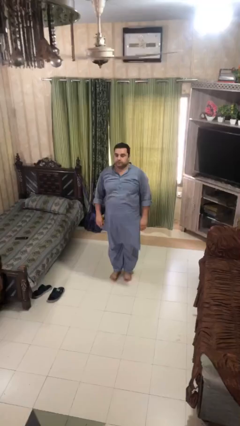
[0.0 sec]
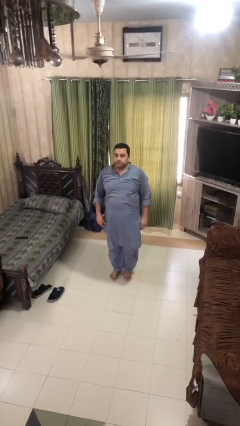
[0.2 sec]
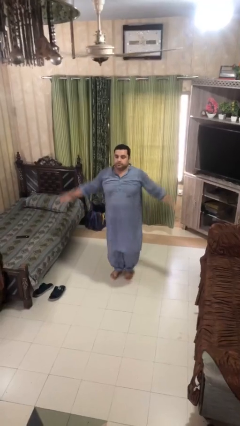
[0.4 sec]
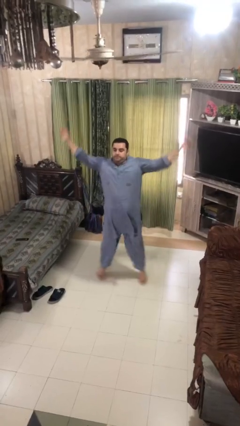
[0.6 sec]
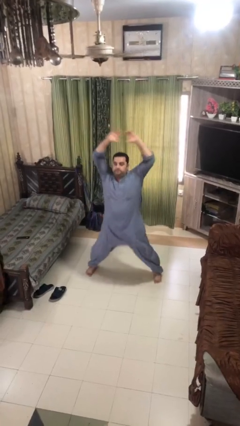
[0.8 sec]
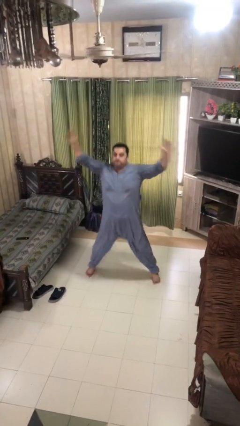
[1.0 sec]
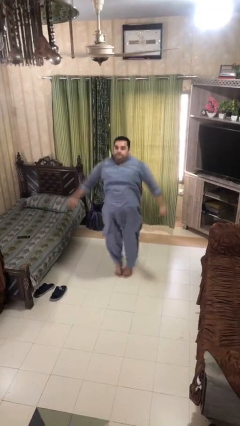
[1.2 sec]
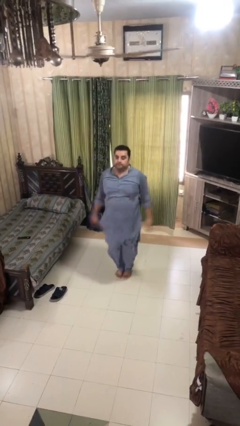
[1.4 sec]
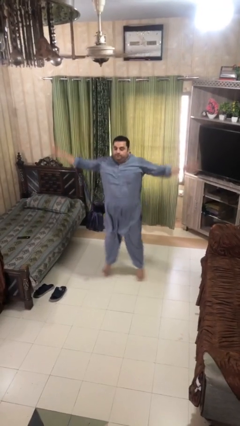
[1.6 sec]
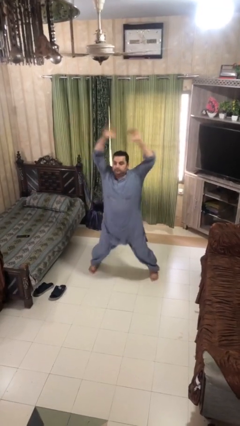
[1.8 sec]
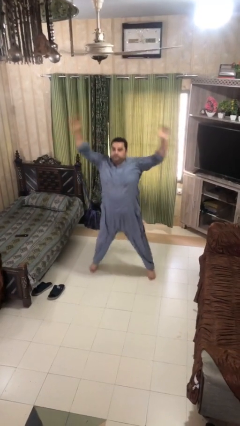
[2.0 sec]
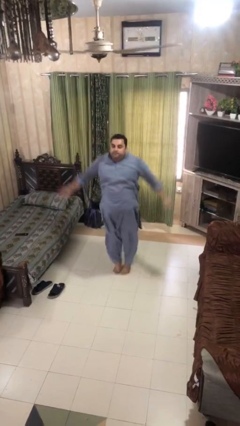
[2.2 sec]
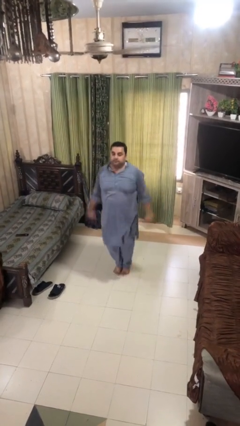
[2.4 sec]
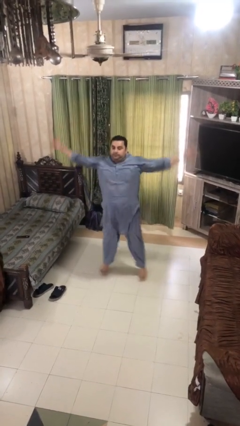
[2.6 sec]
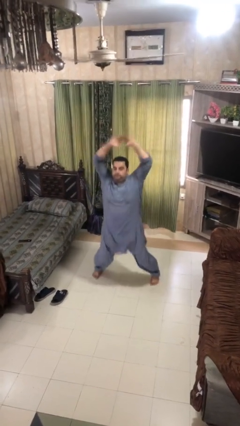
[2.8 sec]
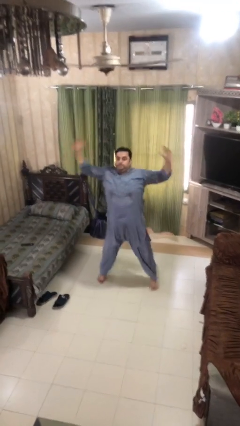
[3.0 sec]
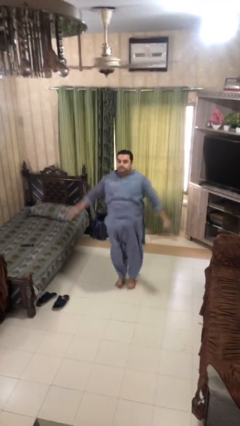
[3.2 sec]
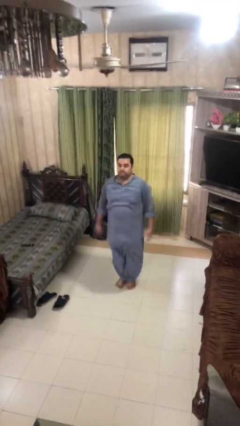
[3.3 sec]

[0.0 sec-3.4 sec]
person exercises with jumping jacks

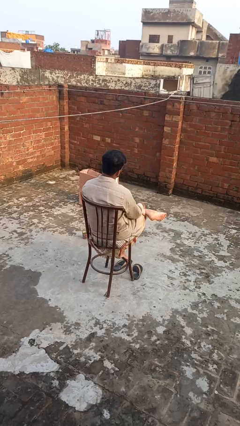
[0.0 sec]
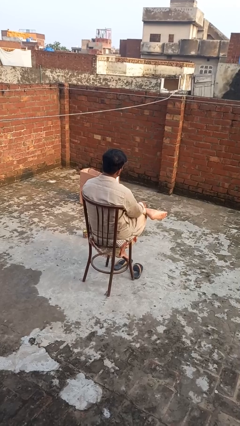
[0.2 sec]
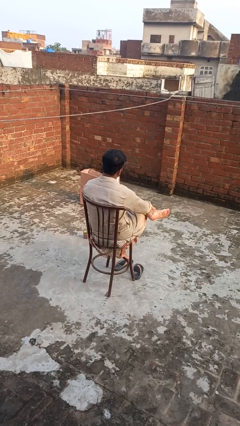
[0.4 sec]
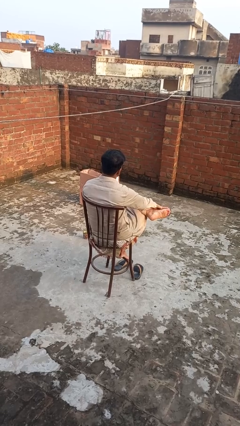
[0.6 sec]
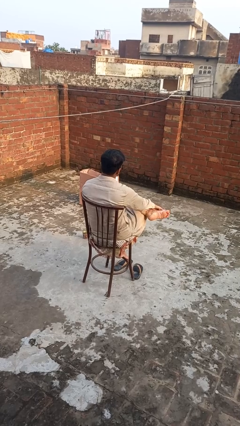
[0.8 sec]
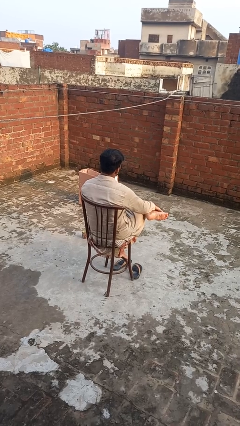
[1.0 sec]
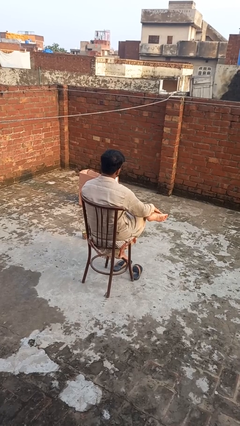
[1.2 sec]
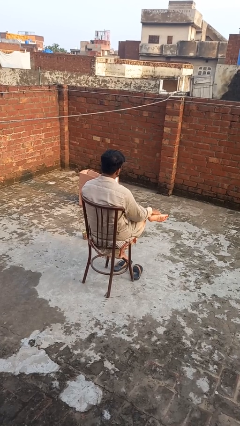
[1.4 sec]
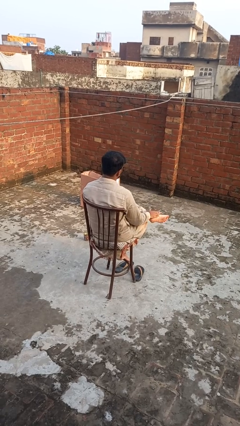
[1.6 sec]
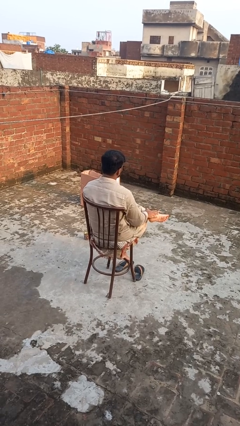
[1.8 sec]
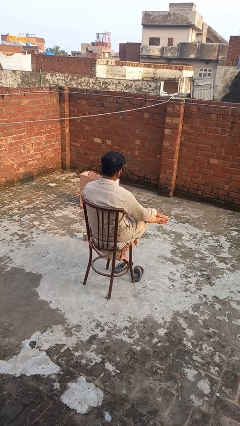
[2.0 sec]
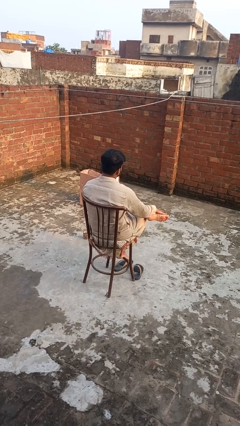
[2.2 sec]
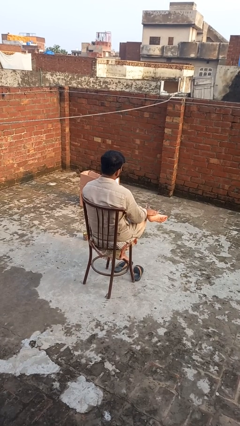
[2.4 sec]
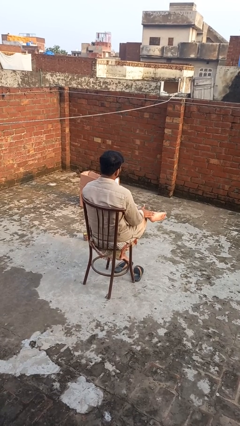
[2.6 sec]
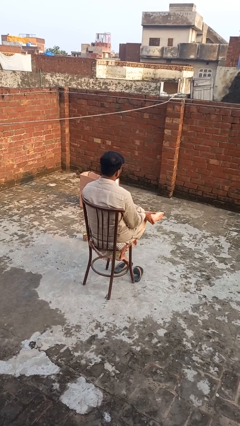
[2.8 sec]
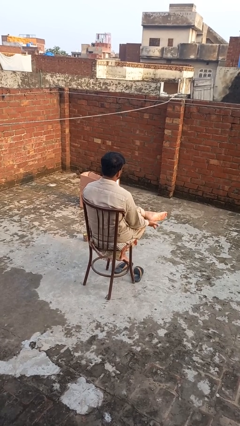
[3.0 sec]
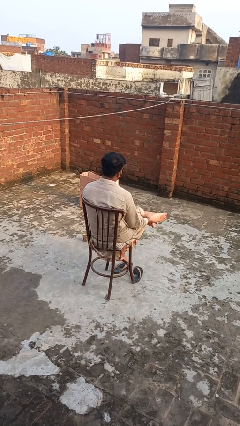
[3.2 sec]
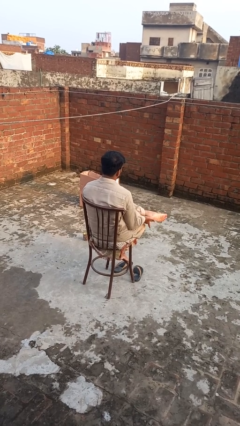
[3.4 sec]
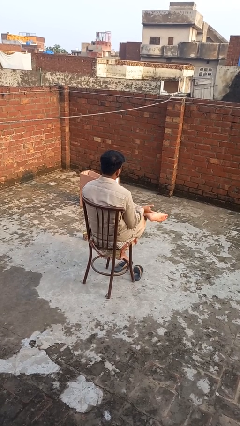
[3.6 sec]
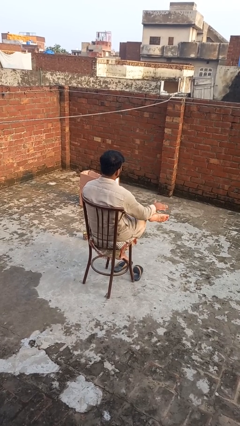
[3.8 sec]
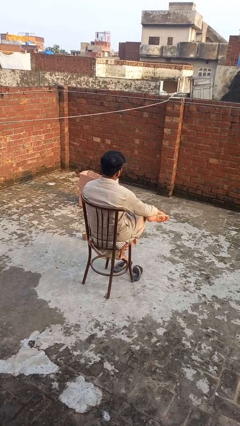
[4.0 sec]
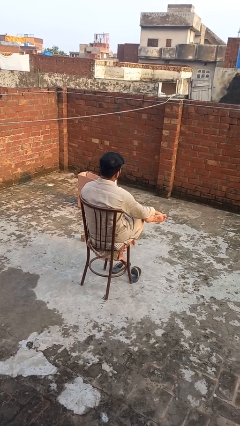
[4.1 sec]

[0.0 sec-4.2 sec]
person rubs foot

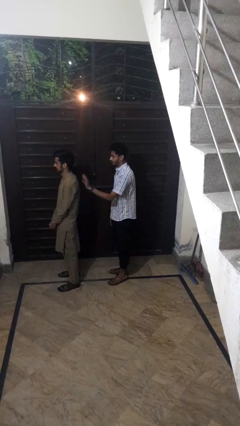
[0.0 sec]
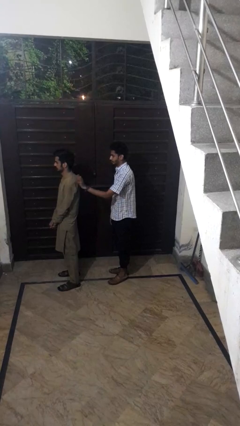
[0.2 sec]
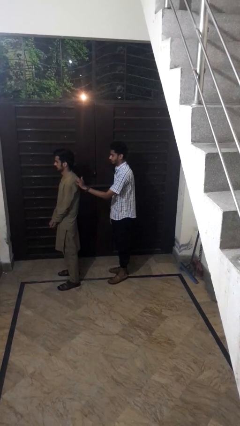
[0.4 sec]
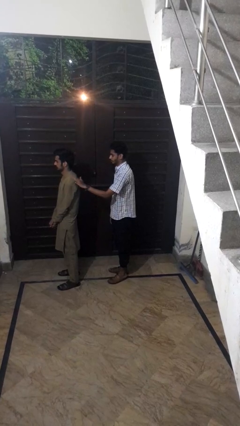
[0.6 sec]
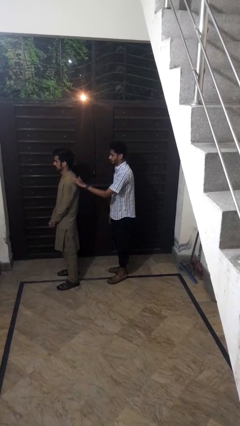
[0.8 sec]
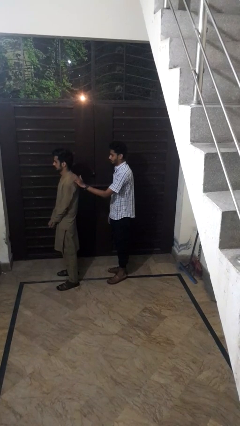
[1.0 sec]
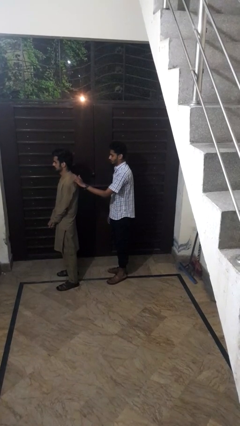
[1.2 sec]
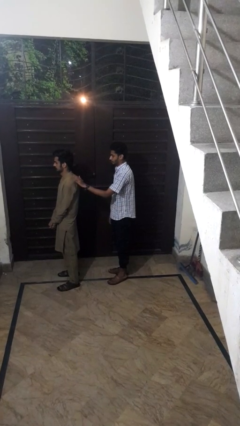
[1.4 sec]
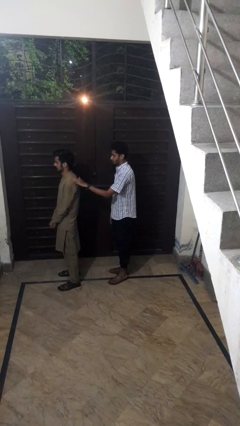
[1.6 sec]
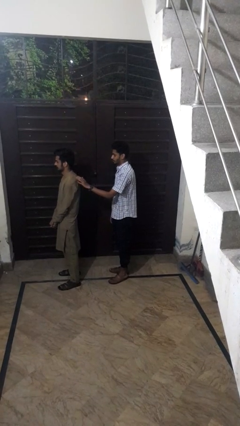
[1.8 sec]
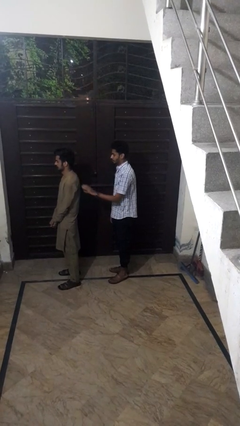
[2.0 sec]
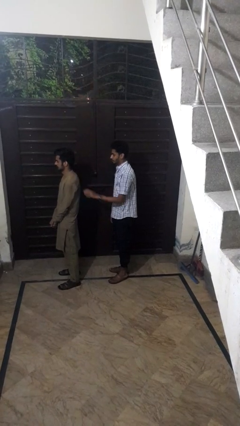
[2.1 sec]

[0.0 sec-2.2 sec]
person touches back of person

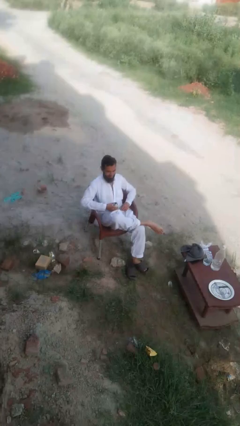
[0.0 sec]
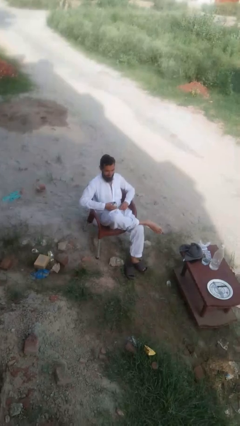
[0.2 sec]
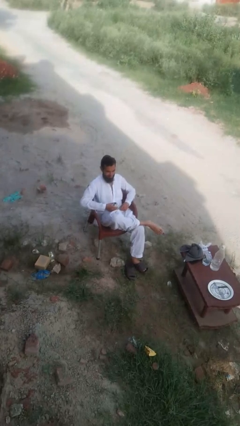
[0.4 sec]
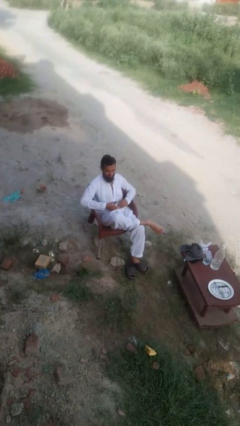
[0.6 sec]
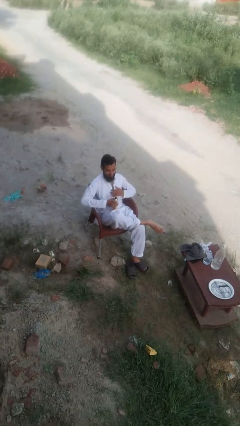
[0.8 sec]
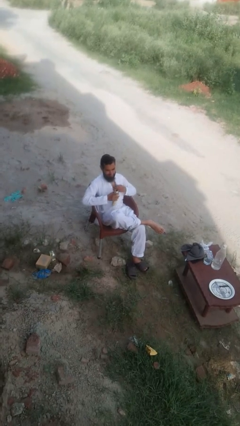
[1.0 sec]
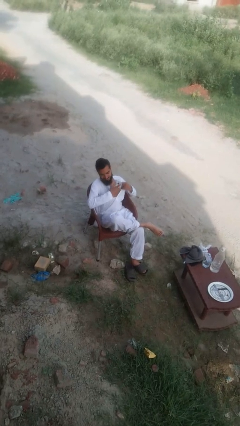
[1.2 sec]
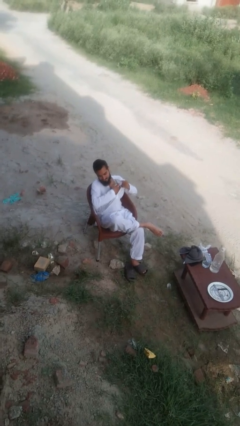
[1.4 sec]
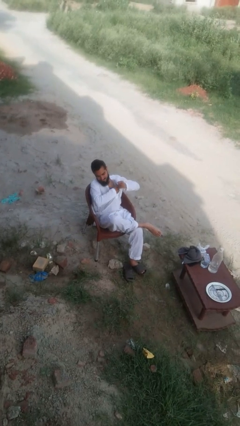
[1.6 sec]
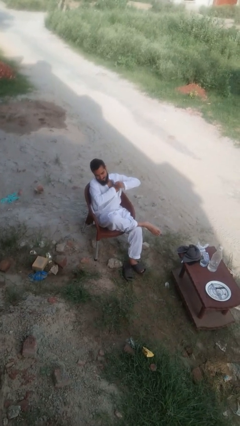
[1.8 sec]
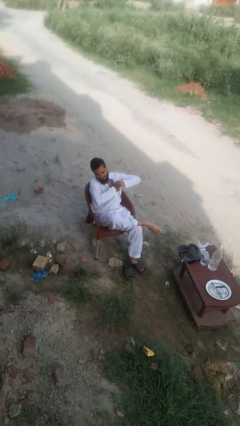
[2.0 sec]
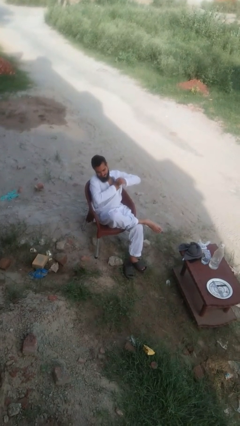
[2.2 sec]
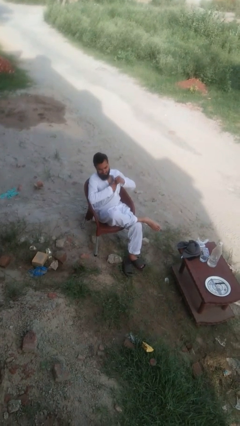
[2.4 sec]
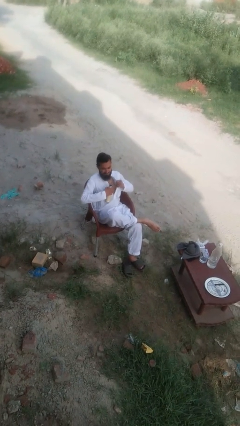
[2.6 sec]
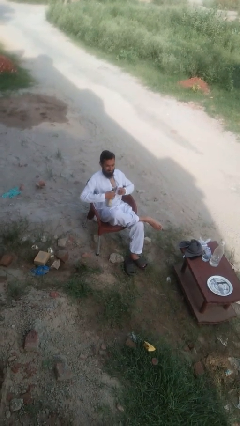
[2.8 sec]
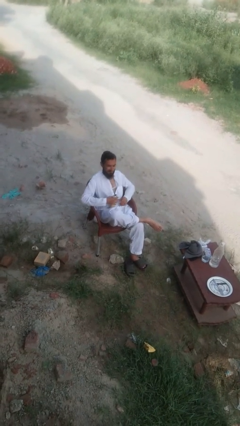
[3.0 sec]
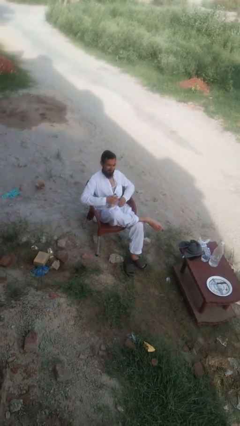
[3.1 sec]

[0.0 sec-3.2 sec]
person applies deodorant

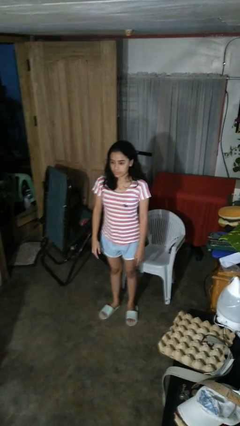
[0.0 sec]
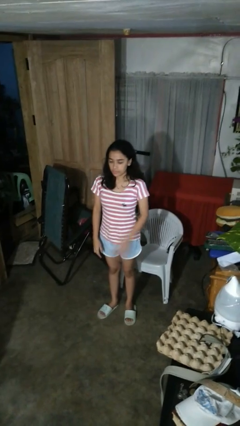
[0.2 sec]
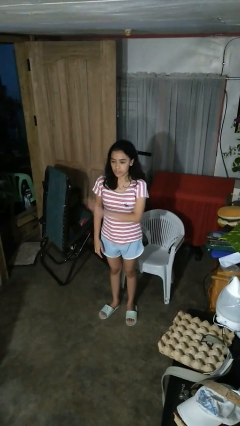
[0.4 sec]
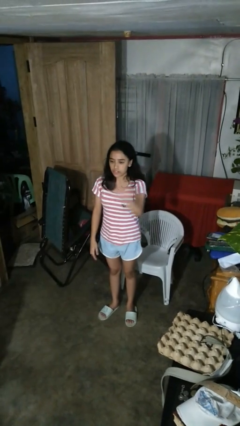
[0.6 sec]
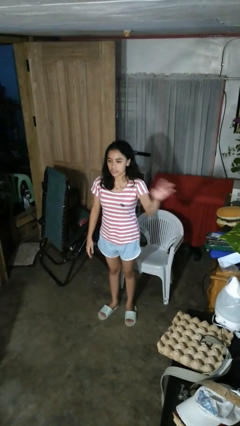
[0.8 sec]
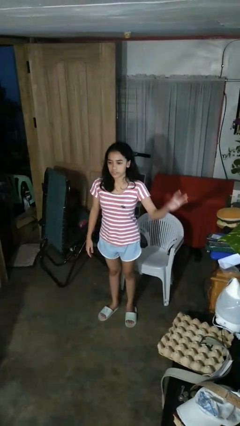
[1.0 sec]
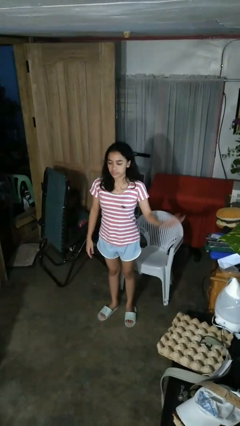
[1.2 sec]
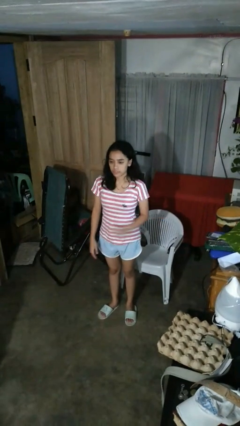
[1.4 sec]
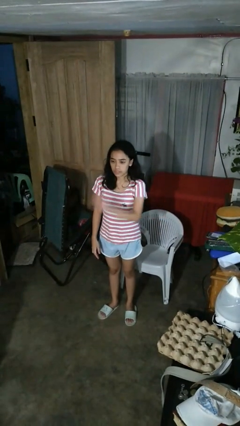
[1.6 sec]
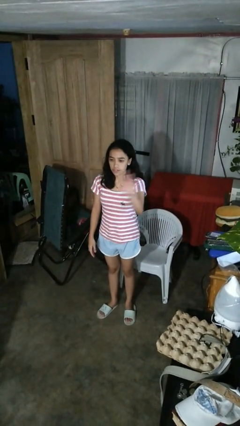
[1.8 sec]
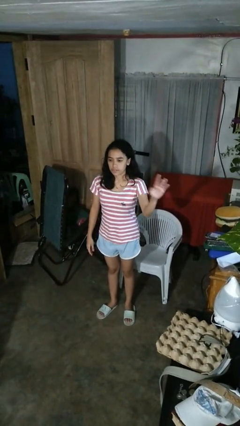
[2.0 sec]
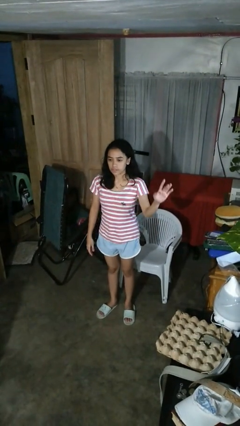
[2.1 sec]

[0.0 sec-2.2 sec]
person gestures swipe left

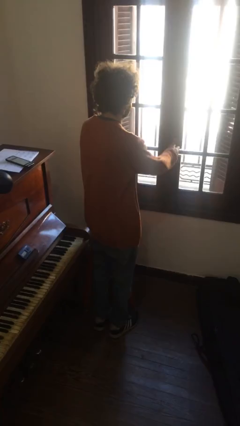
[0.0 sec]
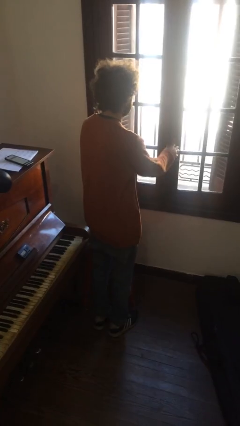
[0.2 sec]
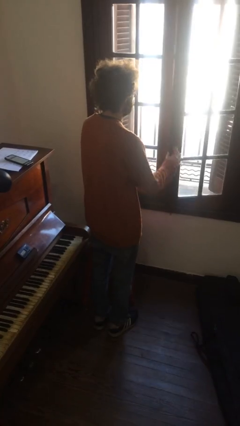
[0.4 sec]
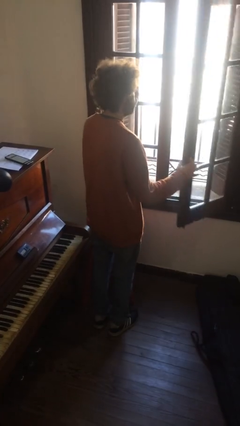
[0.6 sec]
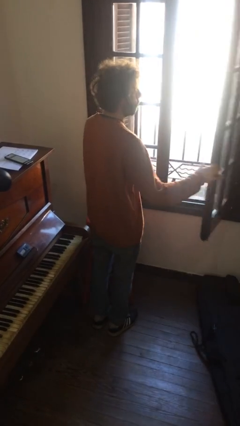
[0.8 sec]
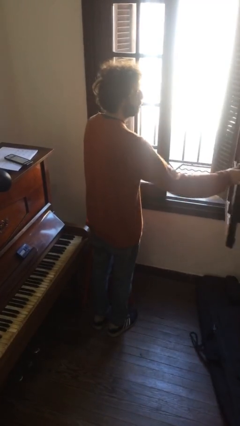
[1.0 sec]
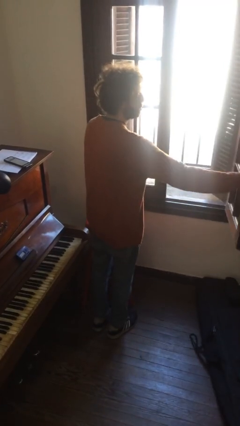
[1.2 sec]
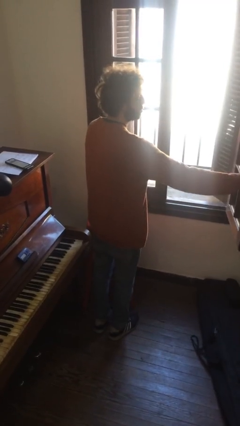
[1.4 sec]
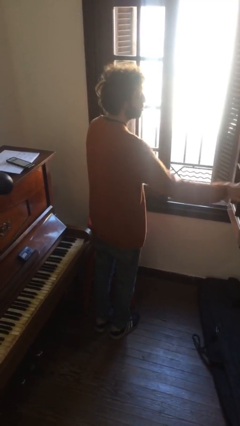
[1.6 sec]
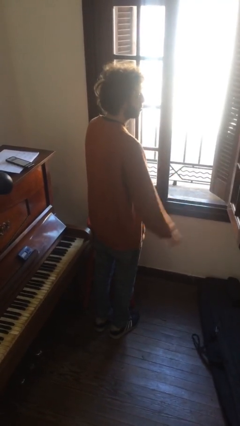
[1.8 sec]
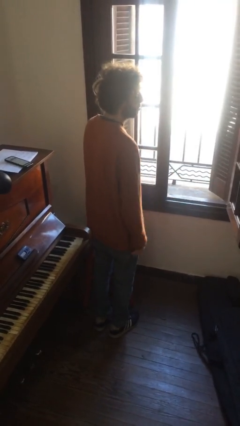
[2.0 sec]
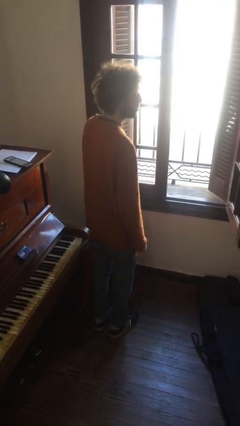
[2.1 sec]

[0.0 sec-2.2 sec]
person opens home window
